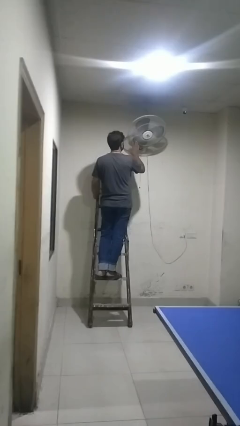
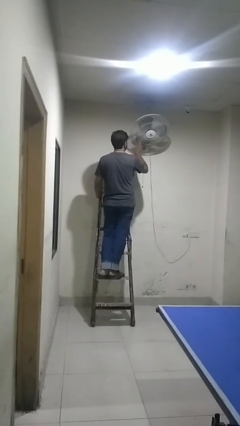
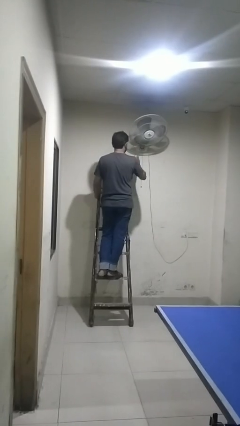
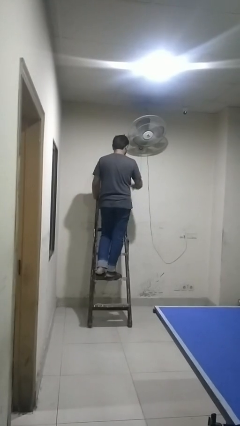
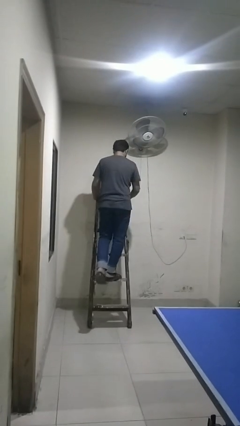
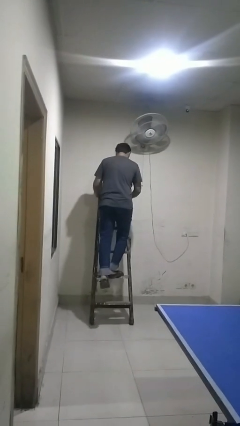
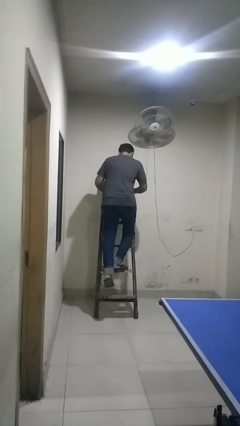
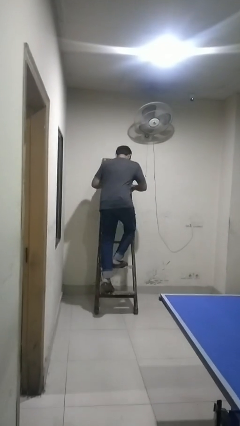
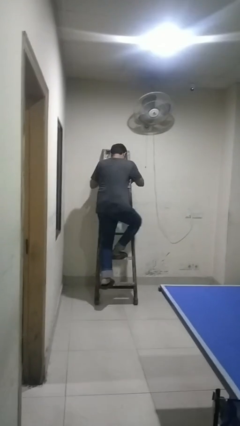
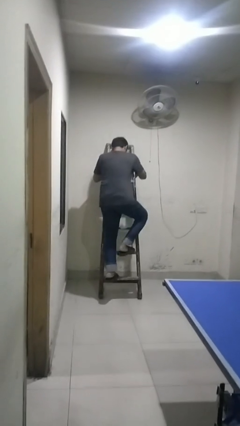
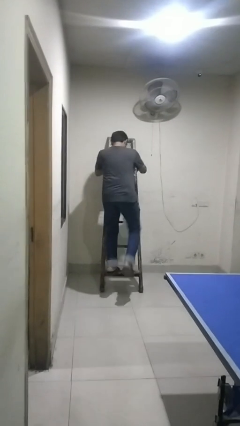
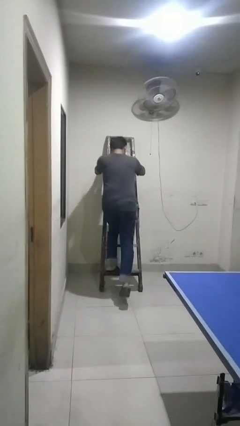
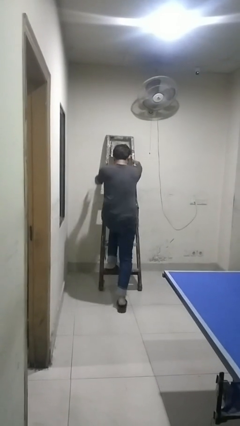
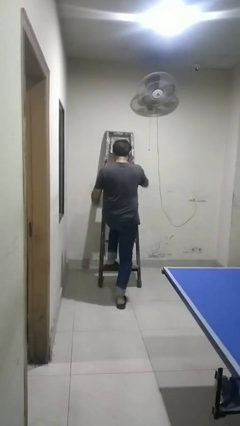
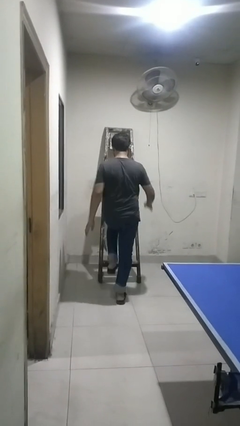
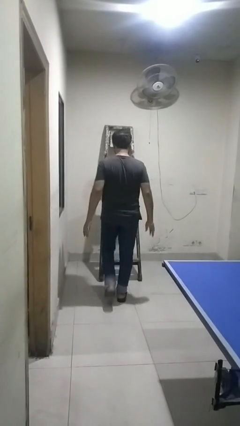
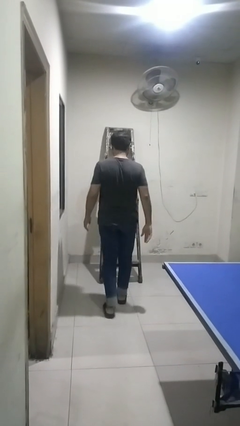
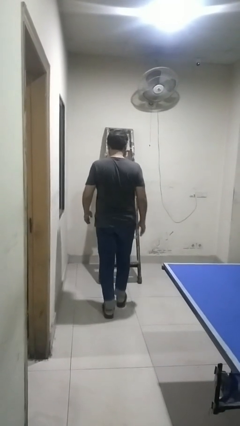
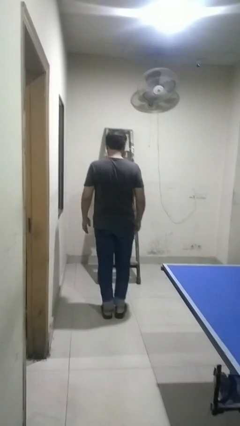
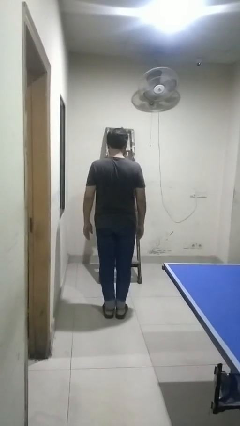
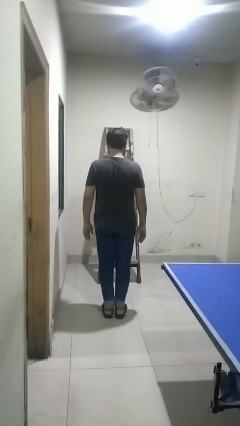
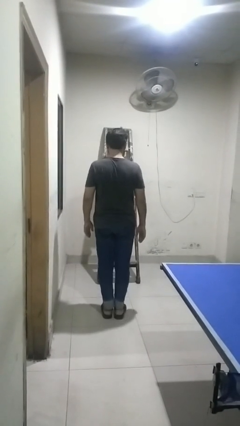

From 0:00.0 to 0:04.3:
person climbs down ladder

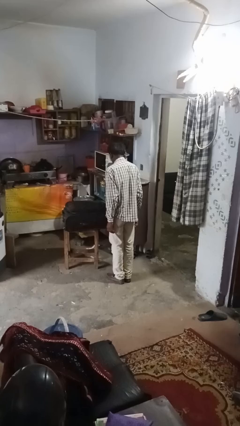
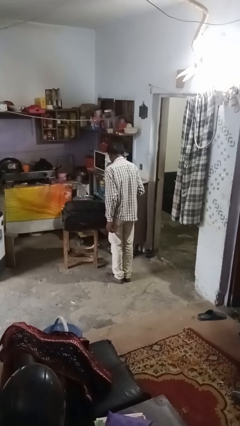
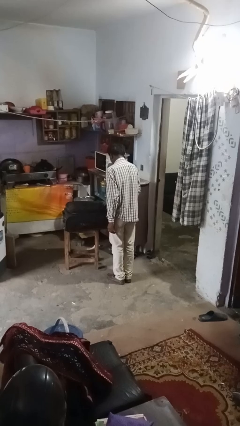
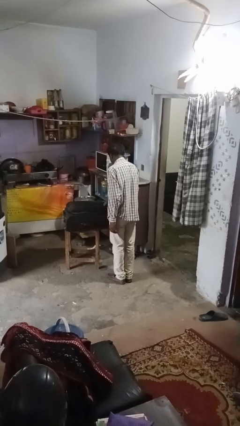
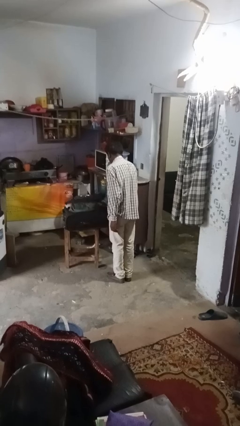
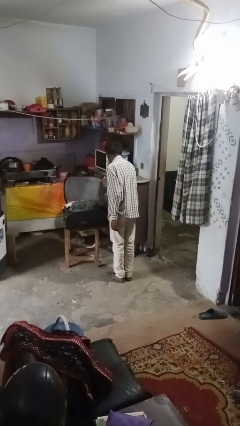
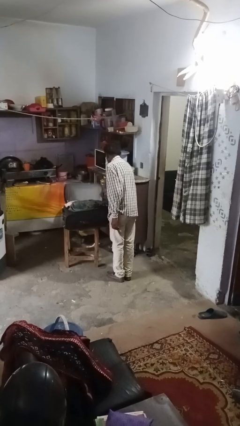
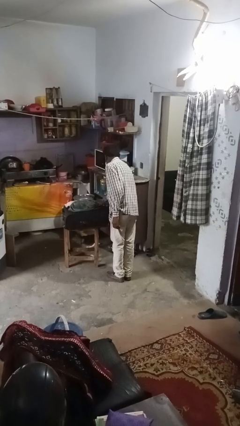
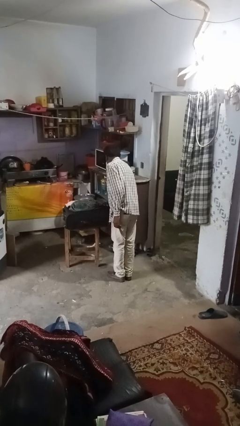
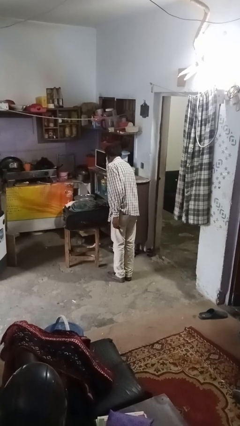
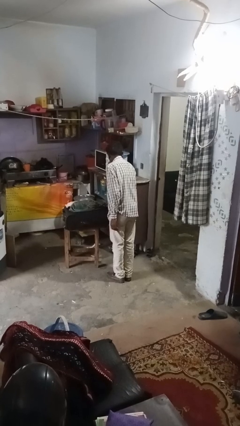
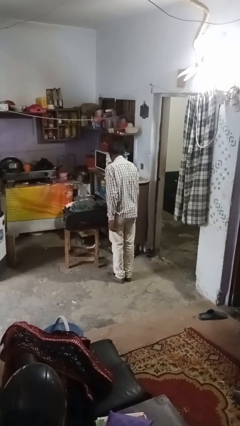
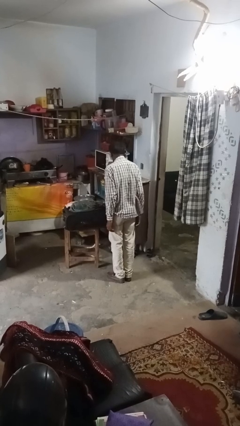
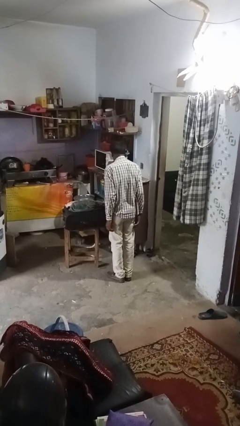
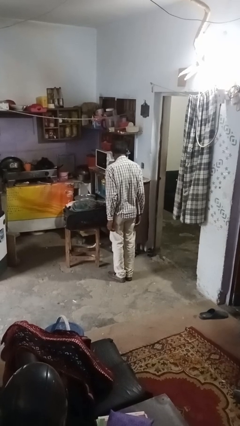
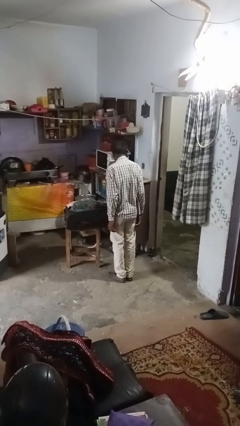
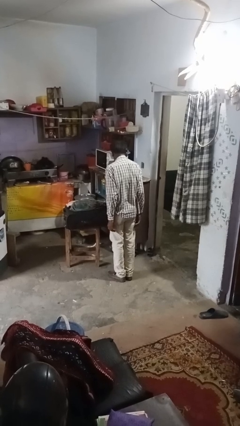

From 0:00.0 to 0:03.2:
person opens suitcase

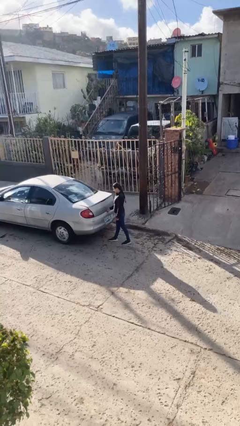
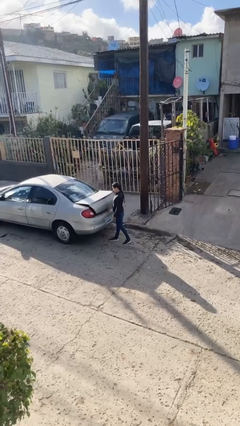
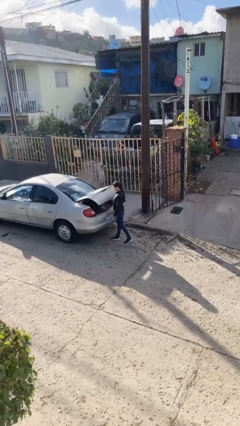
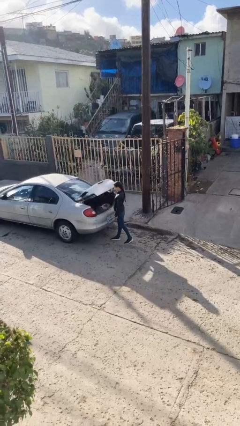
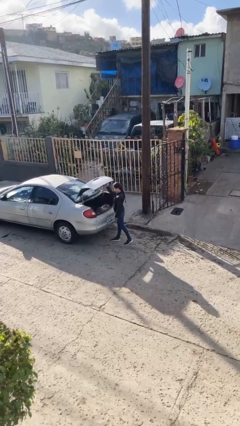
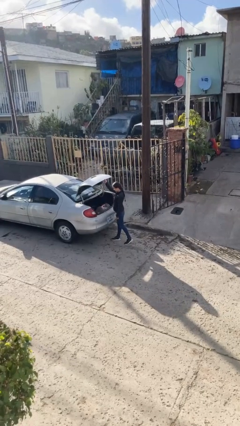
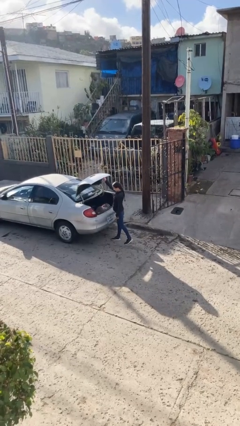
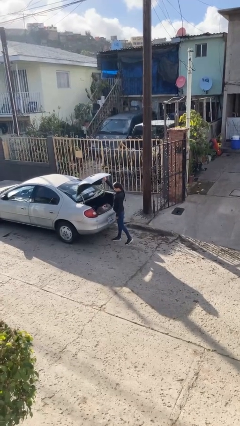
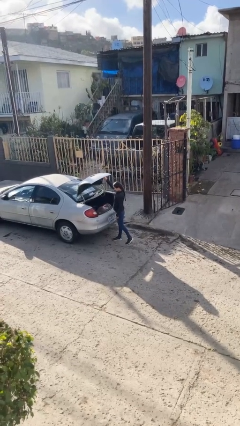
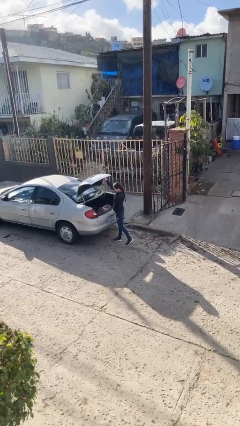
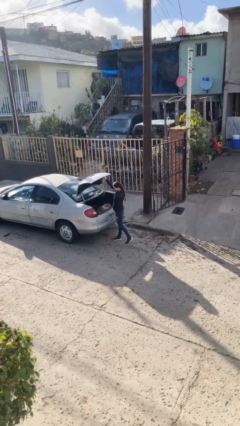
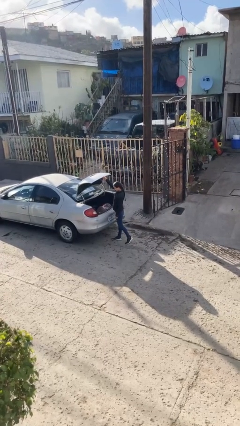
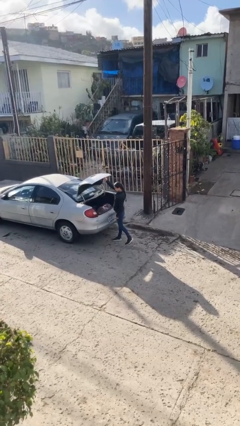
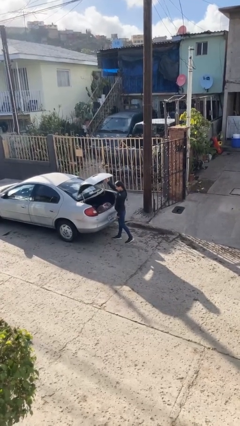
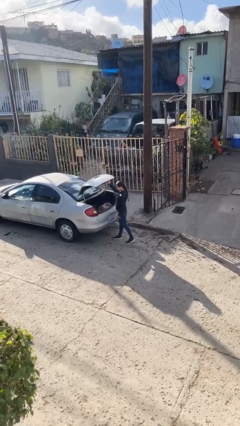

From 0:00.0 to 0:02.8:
person opens car trunk

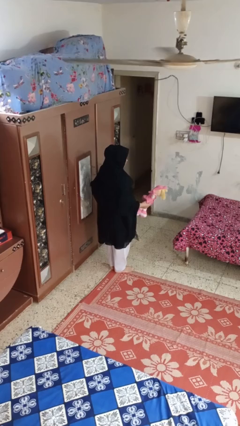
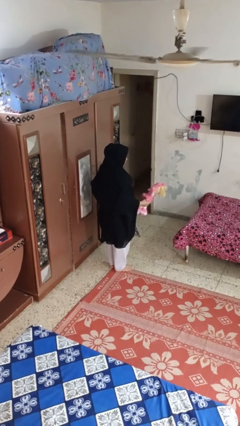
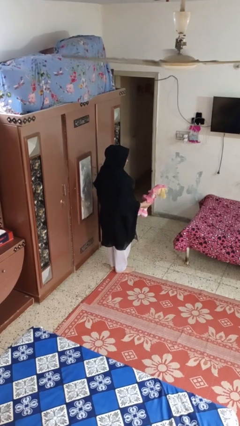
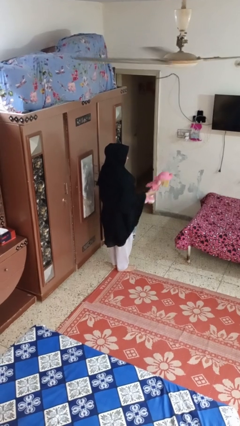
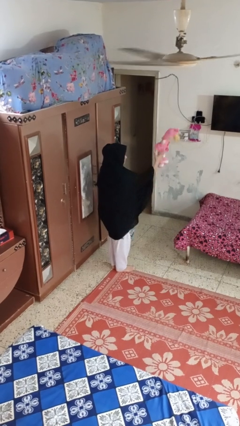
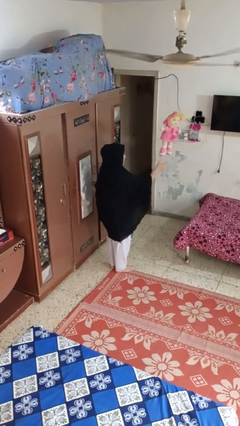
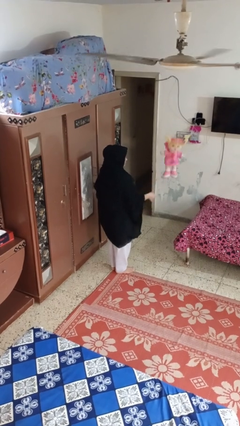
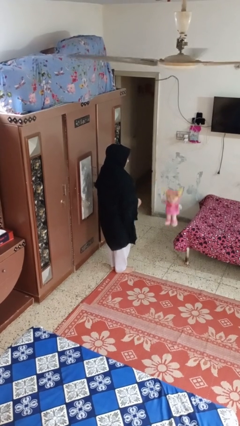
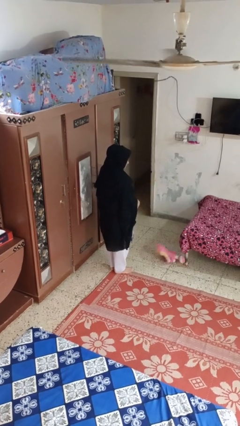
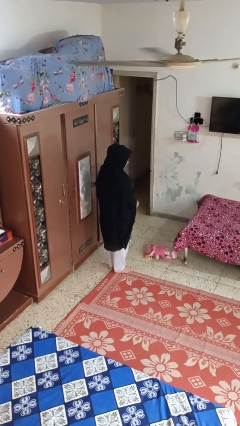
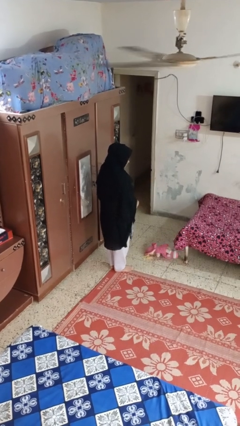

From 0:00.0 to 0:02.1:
person throws object into air

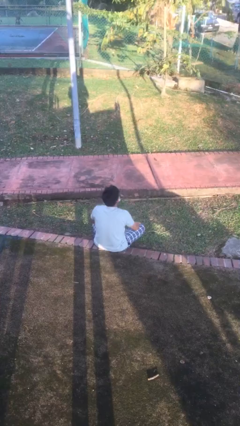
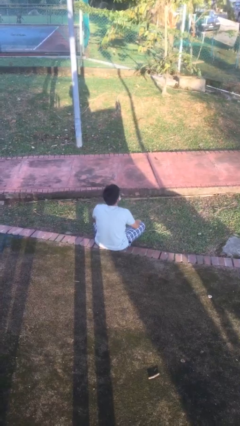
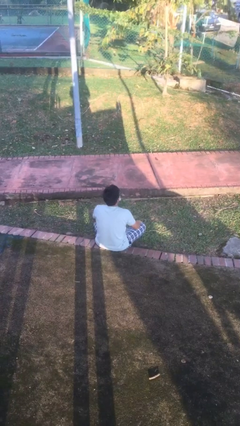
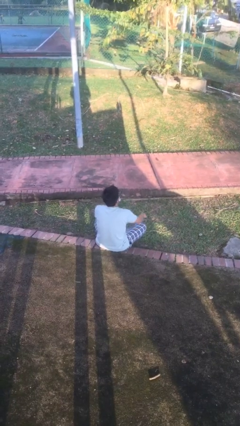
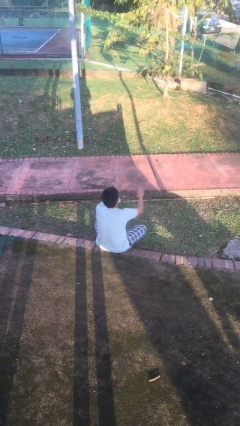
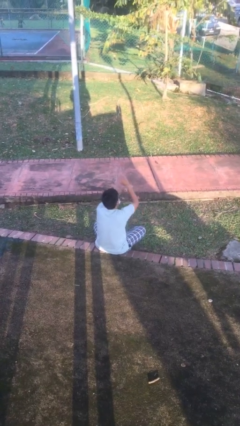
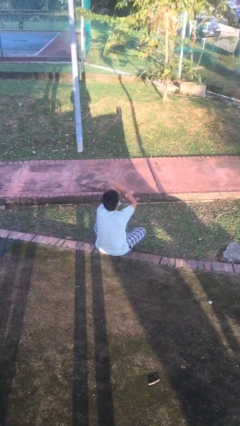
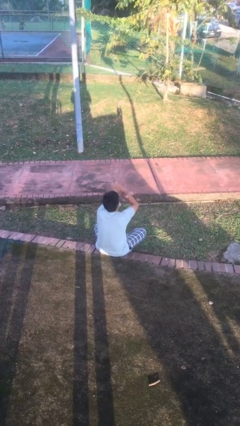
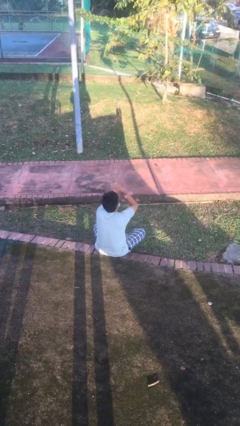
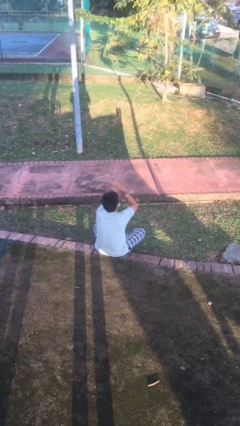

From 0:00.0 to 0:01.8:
person gestures arms x

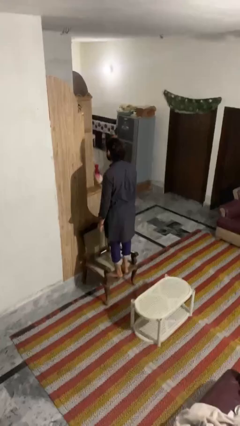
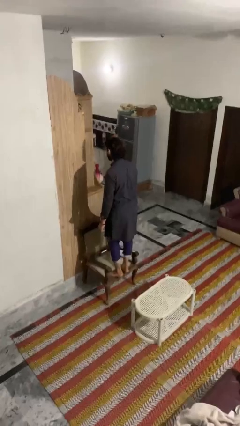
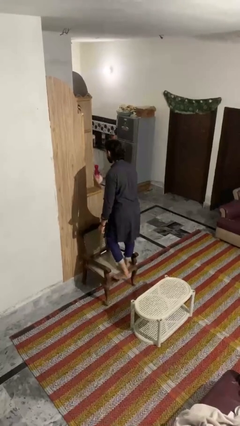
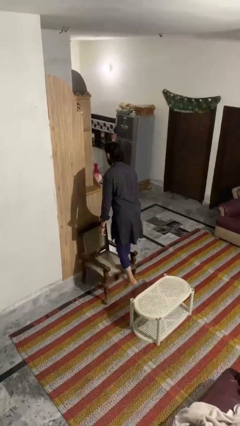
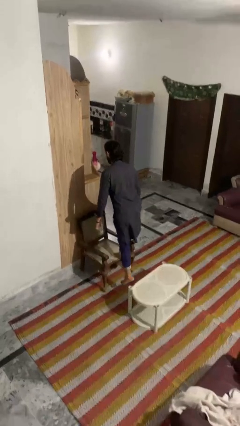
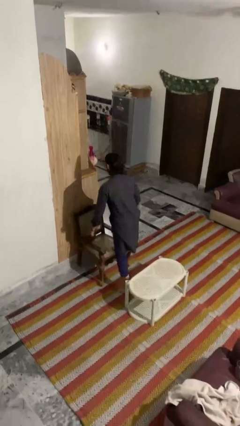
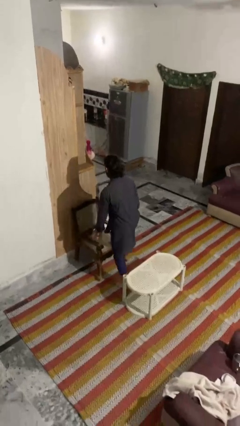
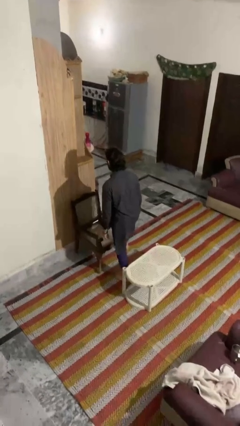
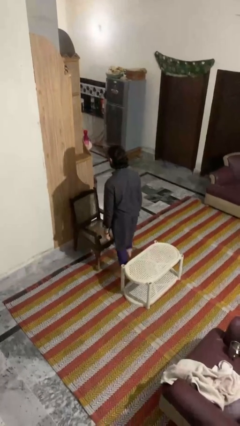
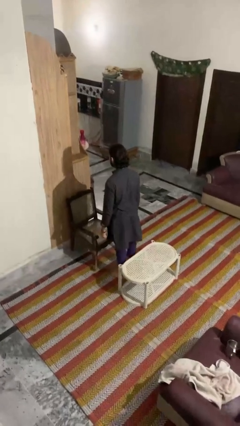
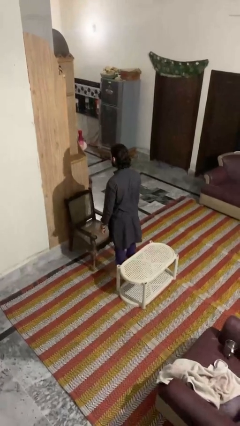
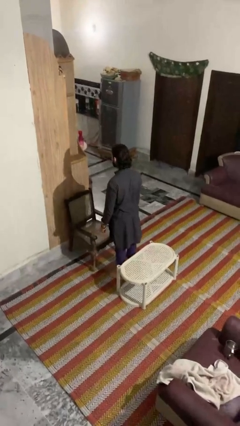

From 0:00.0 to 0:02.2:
person climbs off chair

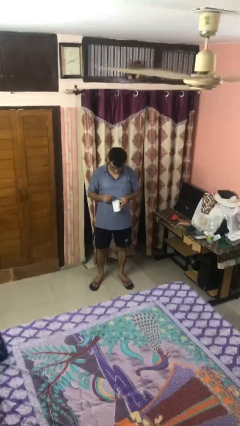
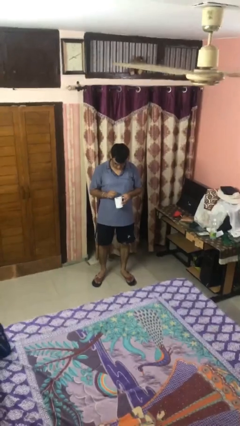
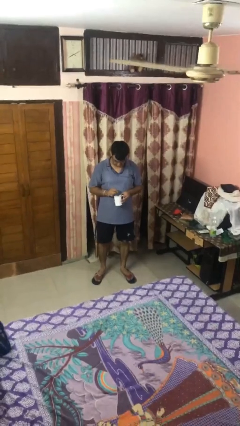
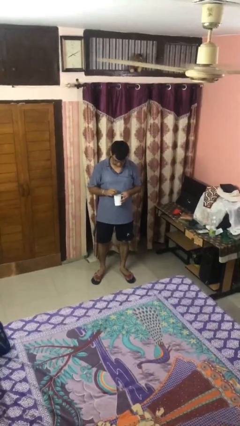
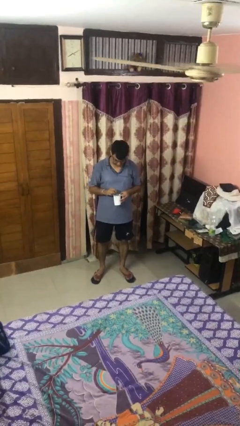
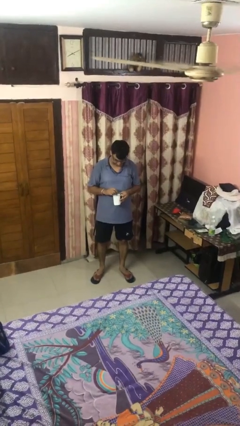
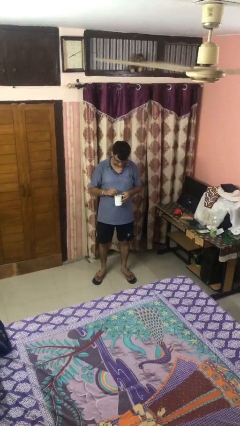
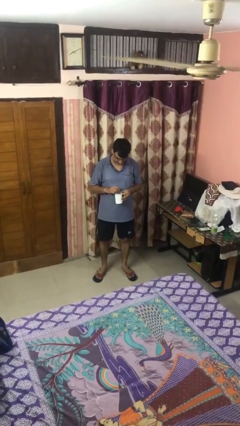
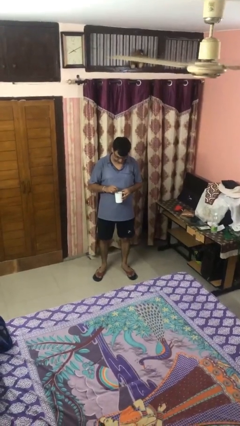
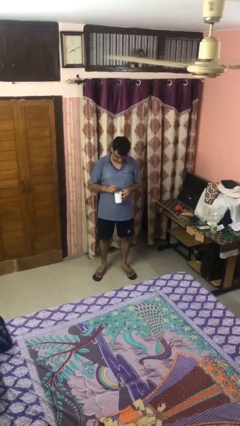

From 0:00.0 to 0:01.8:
person stirs mug
